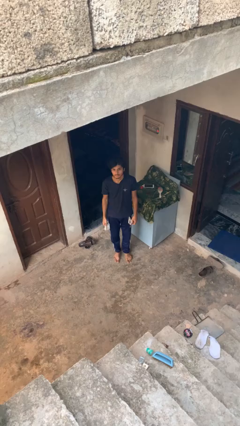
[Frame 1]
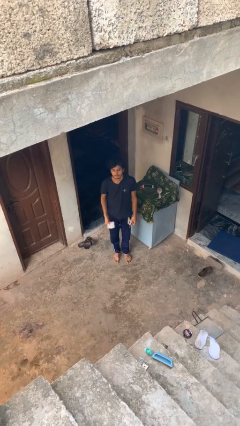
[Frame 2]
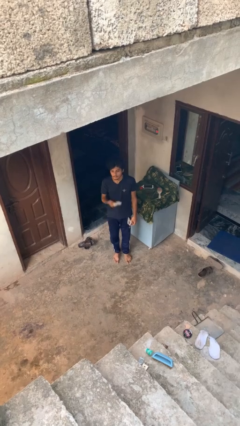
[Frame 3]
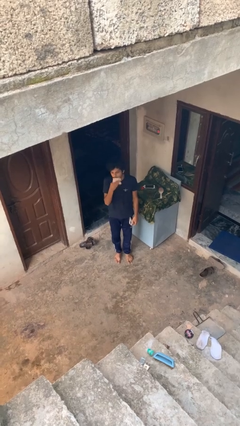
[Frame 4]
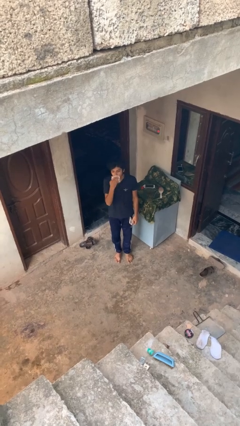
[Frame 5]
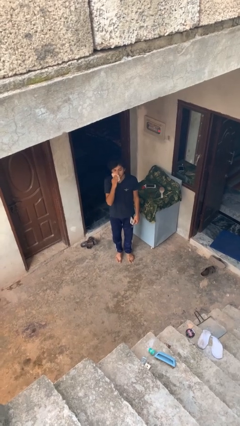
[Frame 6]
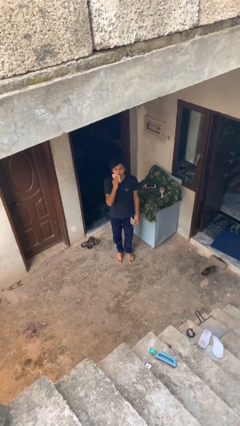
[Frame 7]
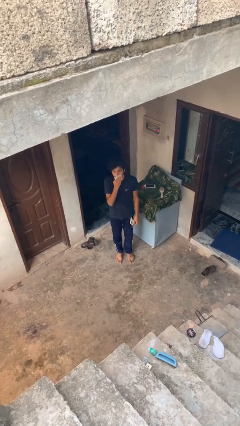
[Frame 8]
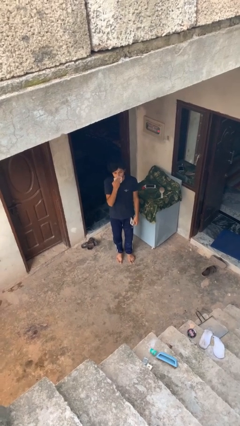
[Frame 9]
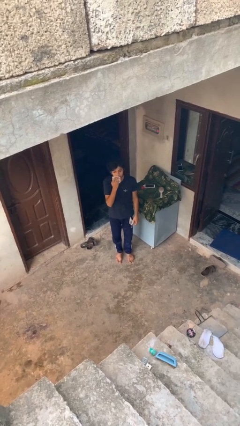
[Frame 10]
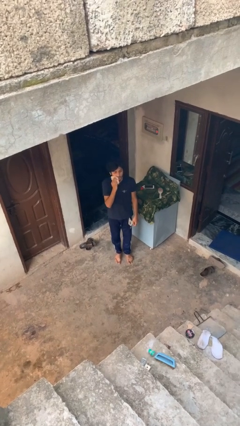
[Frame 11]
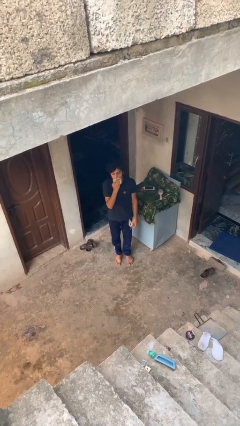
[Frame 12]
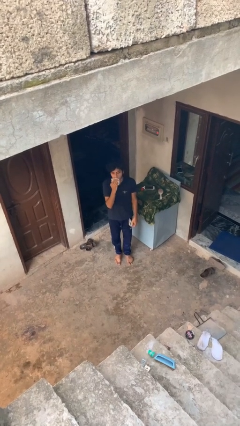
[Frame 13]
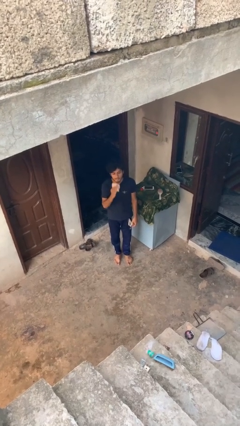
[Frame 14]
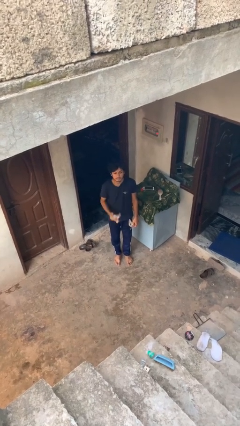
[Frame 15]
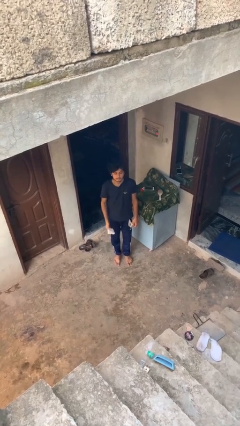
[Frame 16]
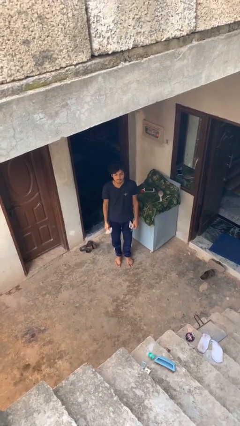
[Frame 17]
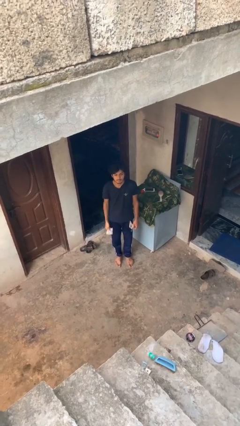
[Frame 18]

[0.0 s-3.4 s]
person wipes mouth with napkin

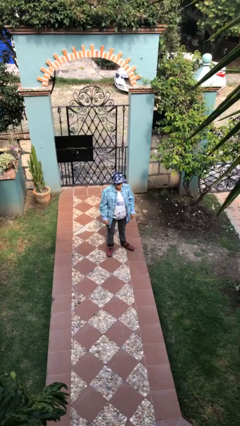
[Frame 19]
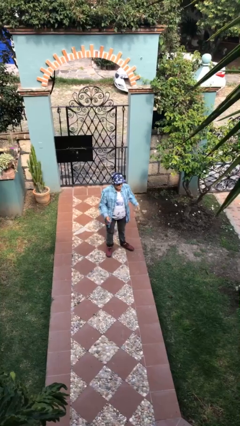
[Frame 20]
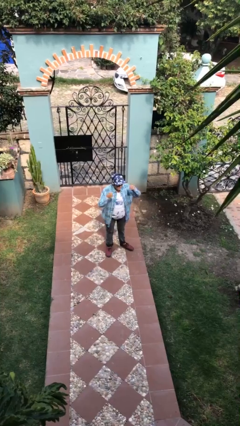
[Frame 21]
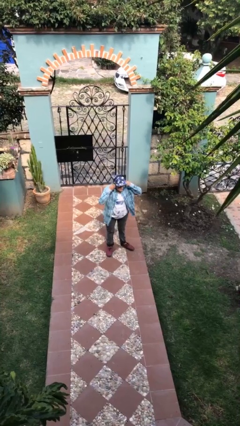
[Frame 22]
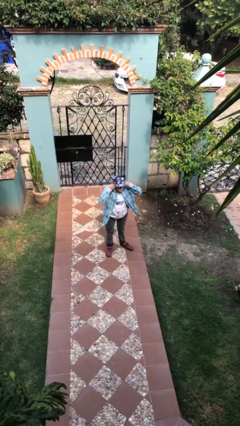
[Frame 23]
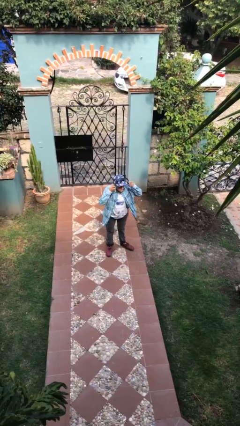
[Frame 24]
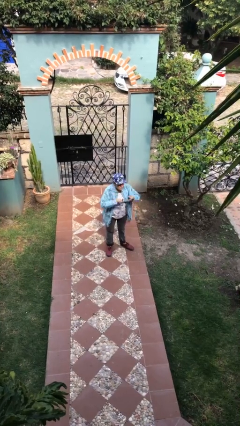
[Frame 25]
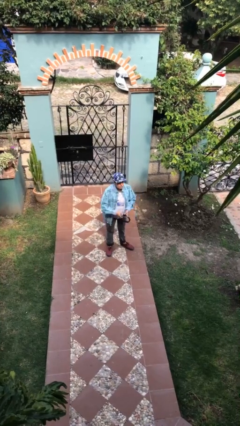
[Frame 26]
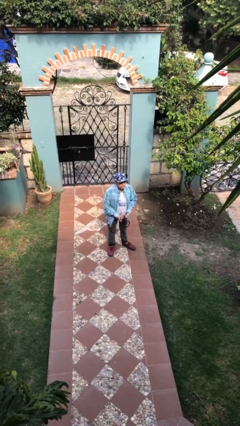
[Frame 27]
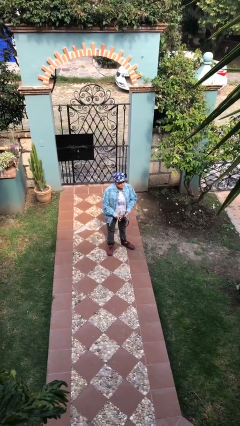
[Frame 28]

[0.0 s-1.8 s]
person takes off headphones

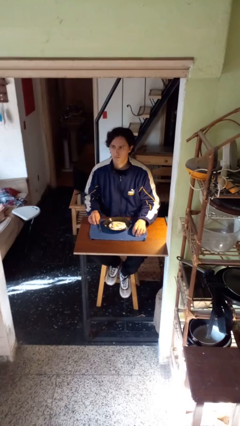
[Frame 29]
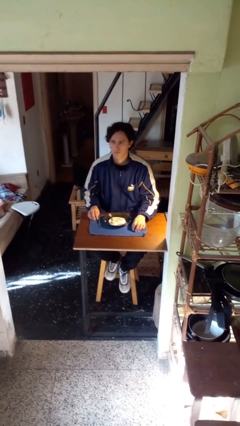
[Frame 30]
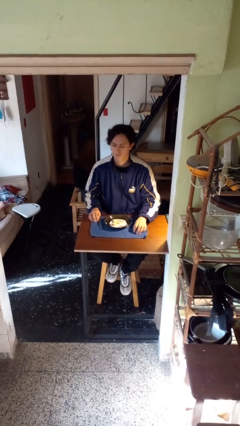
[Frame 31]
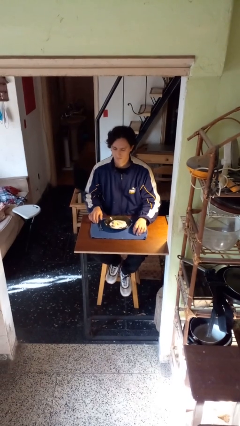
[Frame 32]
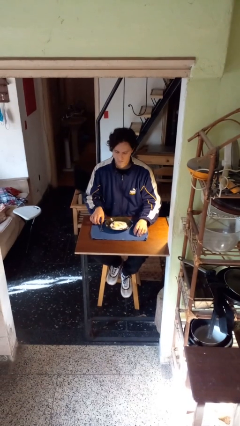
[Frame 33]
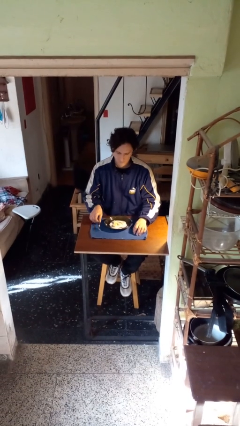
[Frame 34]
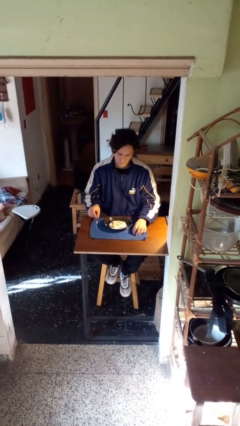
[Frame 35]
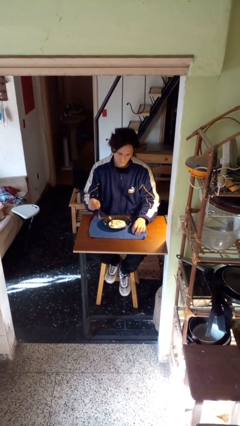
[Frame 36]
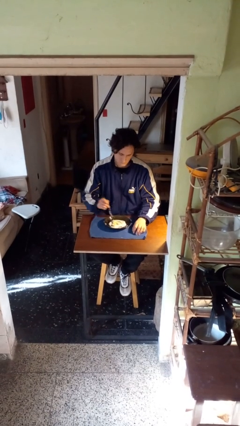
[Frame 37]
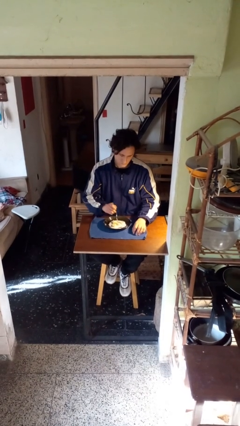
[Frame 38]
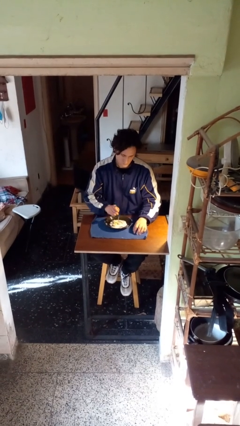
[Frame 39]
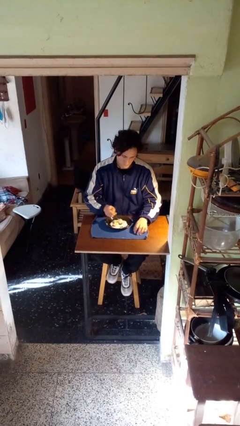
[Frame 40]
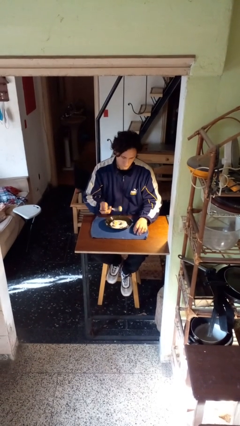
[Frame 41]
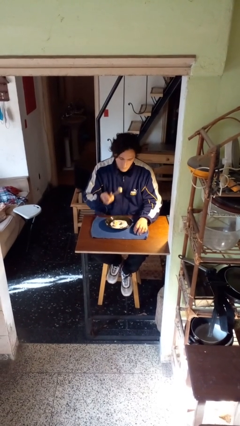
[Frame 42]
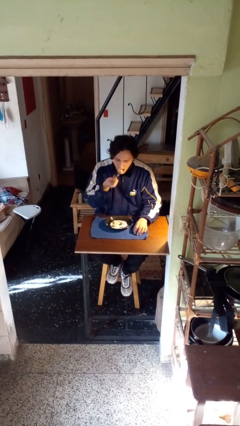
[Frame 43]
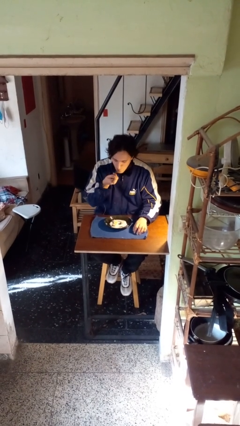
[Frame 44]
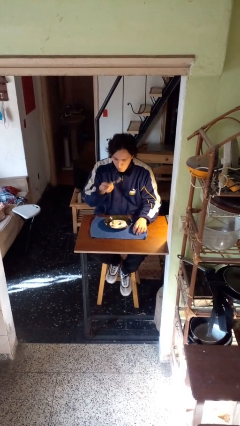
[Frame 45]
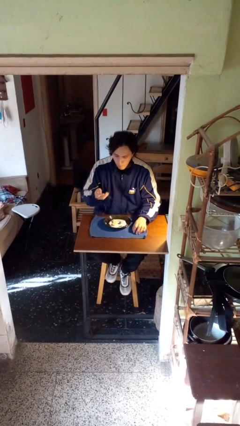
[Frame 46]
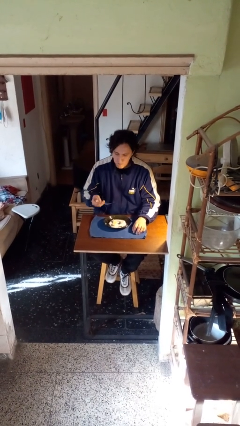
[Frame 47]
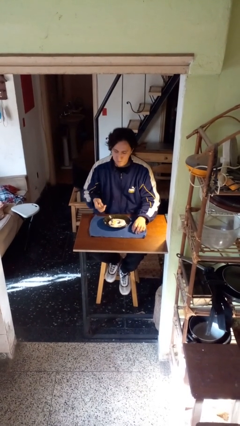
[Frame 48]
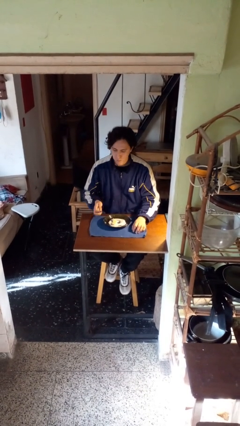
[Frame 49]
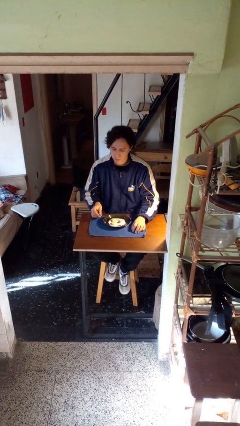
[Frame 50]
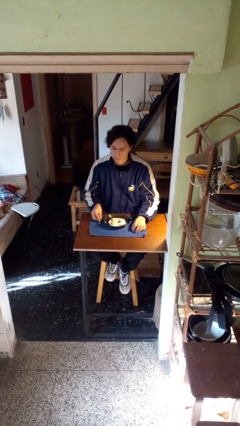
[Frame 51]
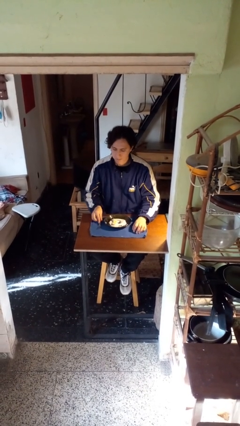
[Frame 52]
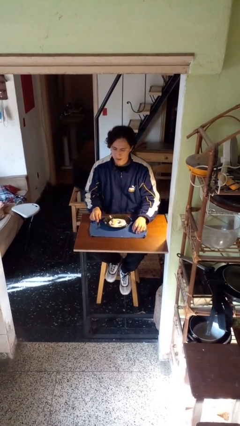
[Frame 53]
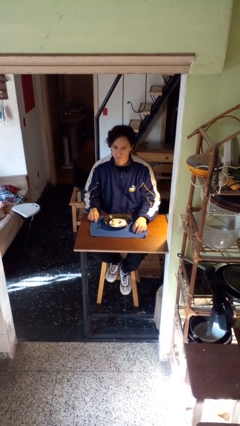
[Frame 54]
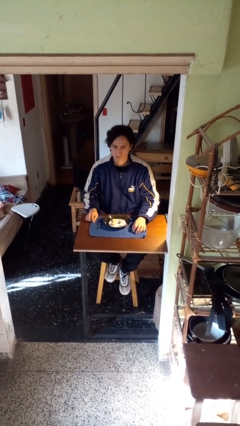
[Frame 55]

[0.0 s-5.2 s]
person eats with utensil

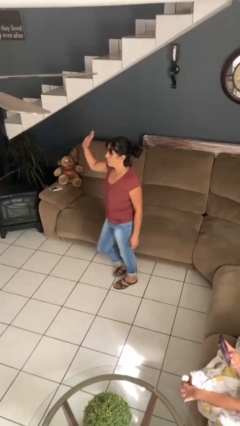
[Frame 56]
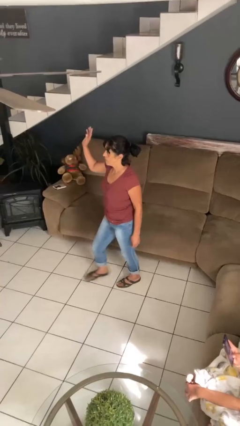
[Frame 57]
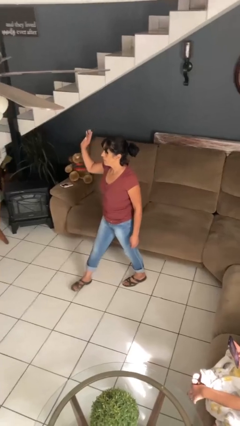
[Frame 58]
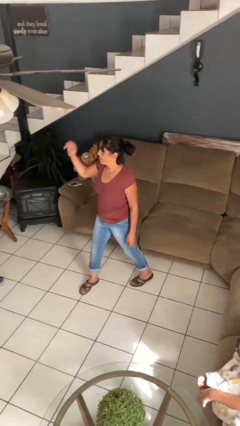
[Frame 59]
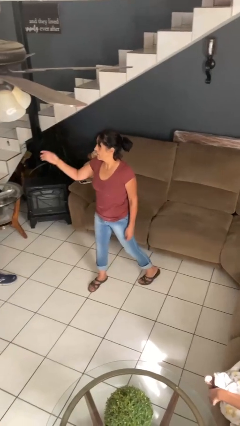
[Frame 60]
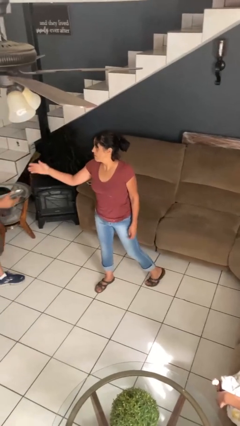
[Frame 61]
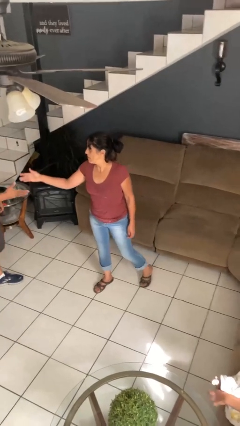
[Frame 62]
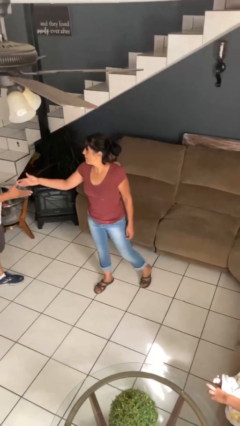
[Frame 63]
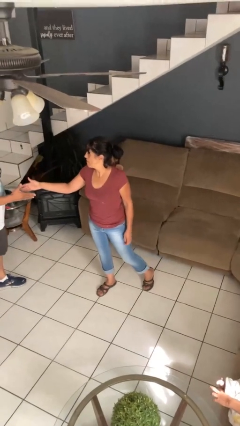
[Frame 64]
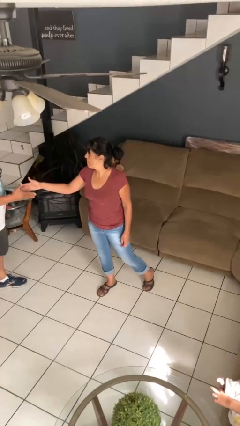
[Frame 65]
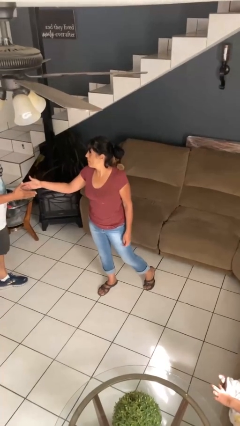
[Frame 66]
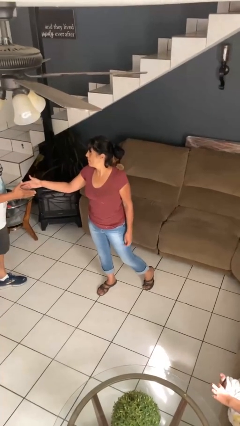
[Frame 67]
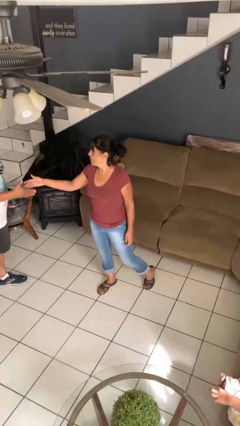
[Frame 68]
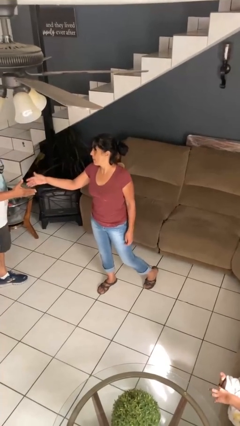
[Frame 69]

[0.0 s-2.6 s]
person waves at person

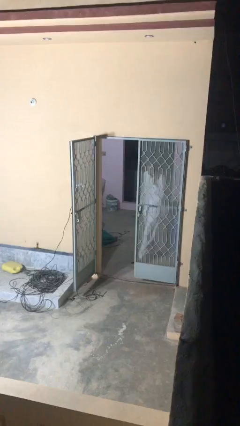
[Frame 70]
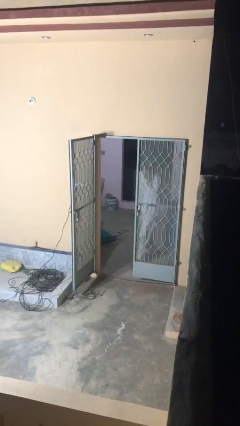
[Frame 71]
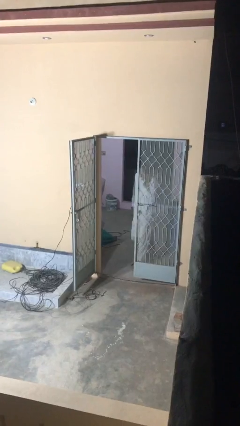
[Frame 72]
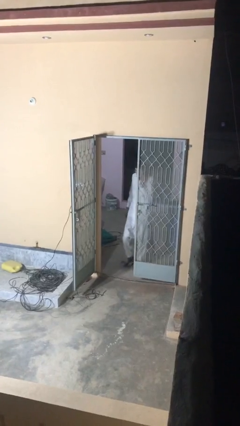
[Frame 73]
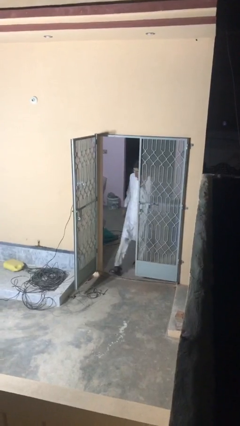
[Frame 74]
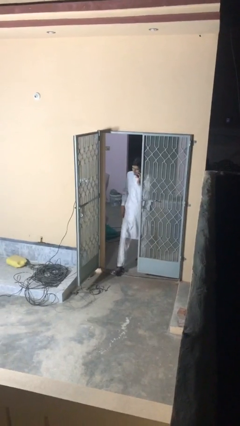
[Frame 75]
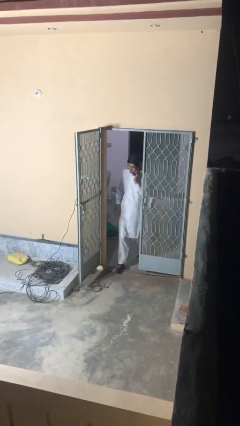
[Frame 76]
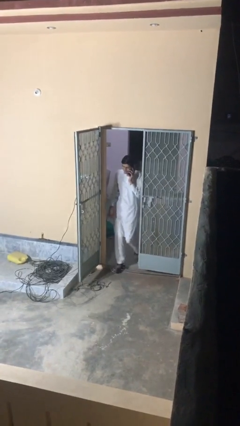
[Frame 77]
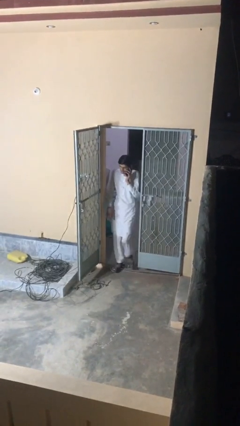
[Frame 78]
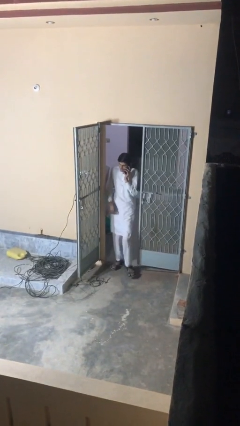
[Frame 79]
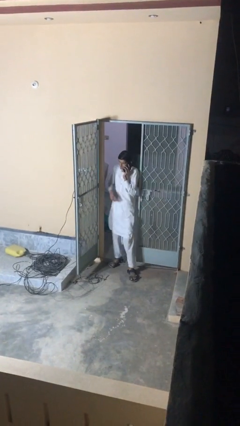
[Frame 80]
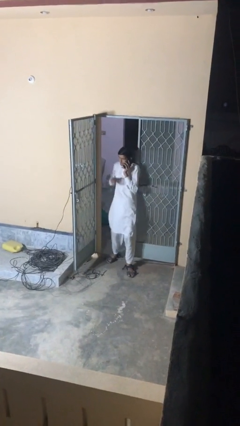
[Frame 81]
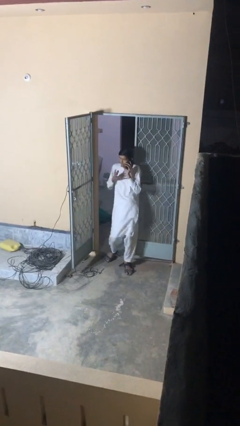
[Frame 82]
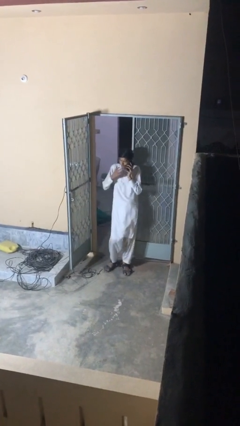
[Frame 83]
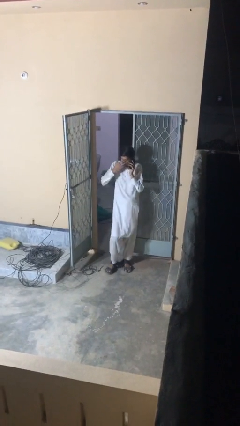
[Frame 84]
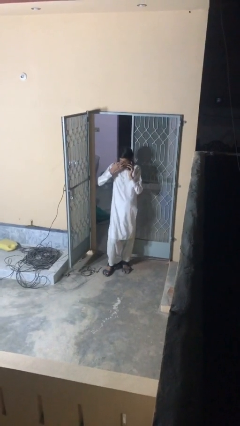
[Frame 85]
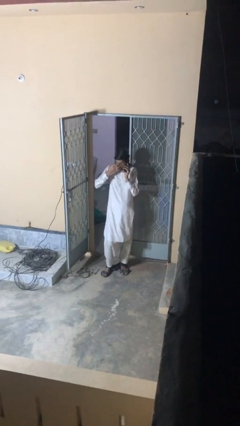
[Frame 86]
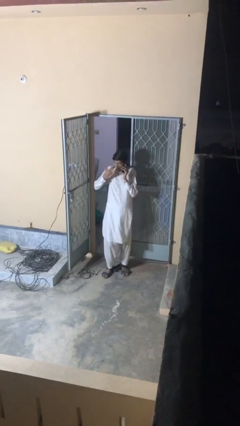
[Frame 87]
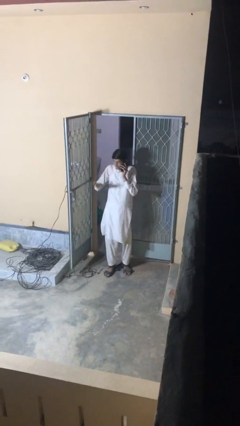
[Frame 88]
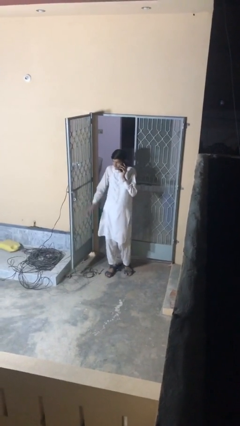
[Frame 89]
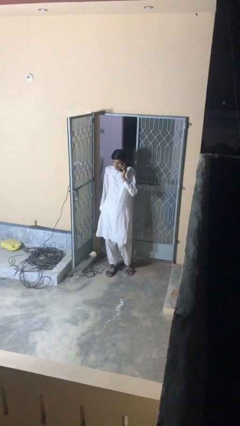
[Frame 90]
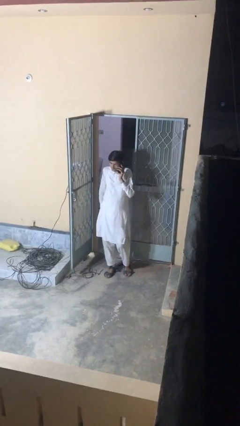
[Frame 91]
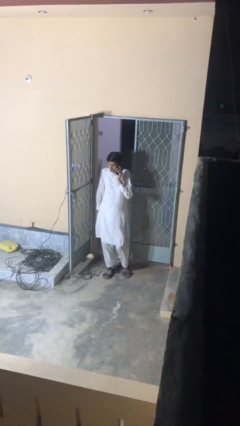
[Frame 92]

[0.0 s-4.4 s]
person enters scene through structure

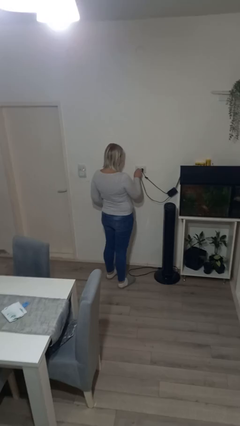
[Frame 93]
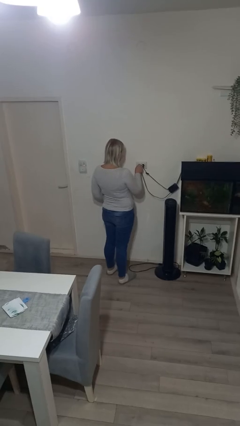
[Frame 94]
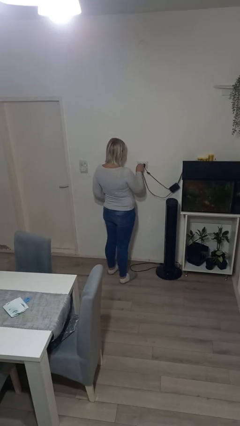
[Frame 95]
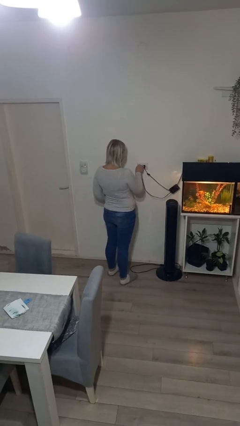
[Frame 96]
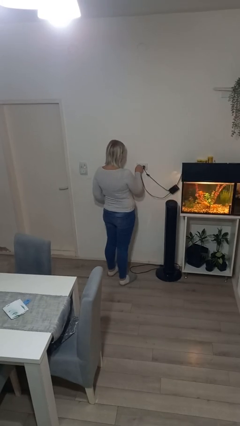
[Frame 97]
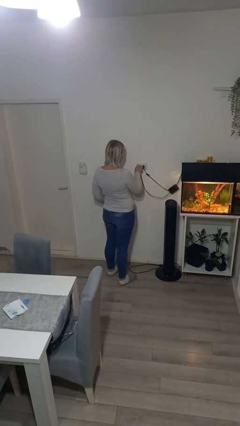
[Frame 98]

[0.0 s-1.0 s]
person plugs into electrical socket
